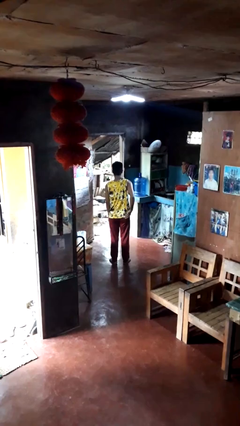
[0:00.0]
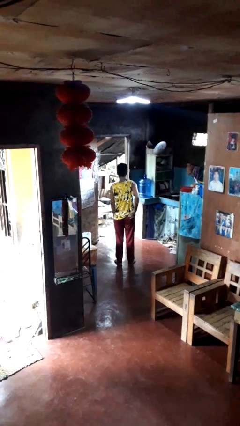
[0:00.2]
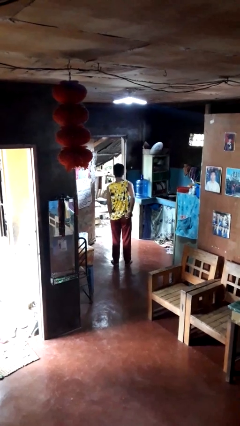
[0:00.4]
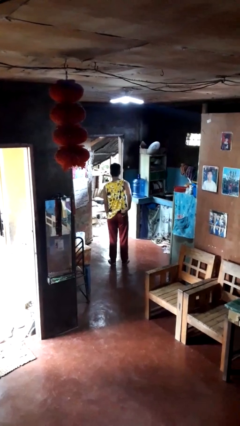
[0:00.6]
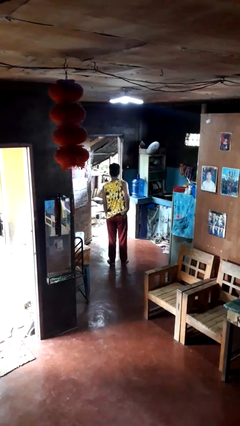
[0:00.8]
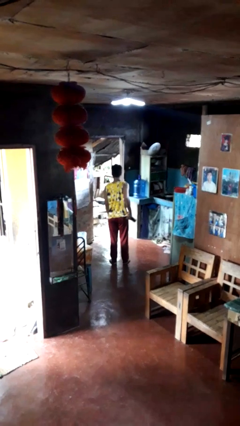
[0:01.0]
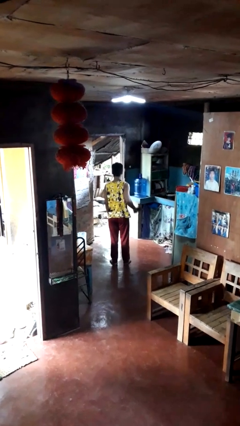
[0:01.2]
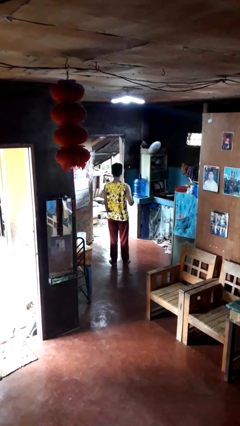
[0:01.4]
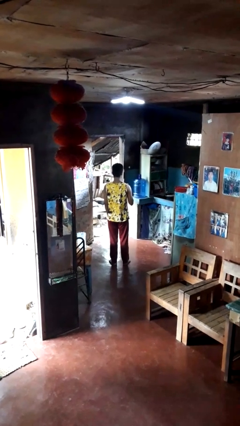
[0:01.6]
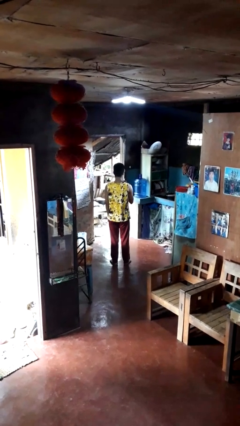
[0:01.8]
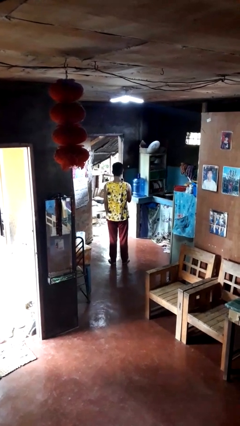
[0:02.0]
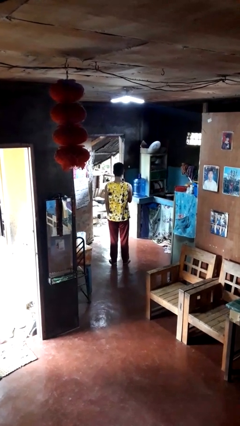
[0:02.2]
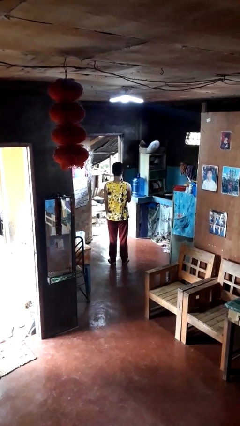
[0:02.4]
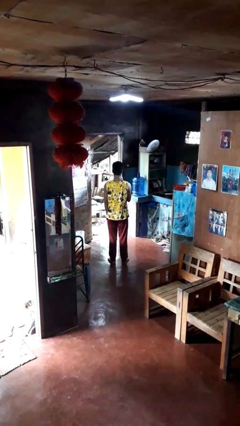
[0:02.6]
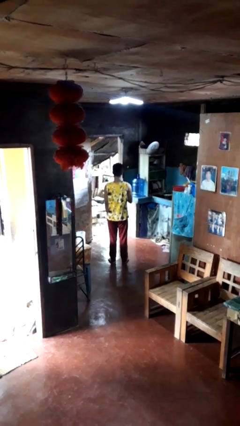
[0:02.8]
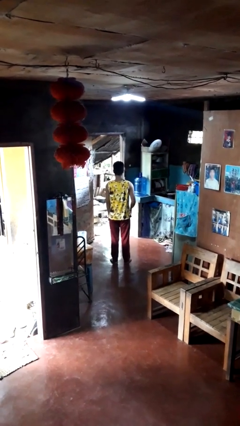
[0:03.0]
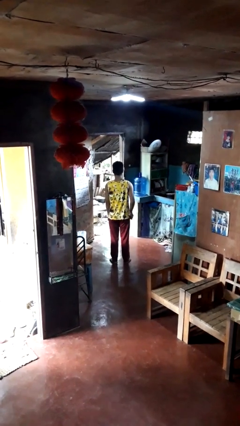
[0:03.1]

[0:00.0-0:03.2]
person takes phone from pocket

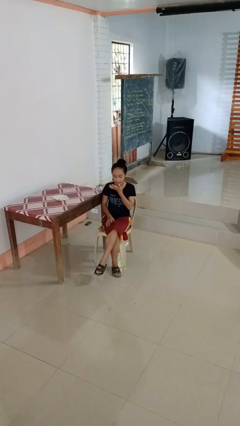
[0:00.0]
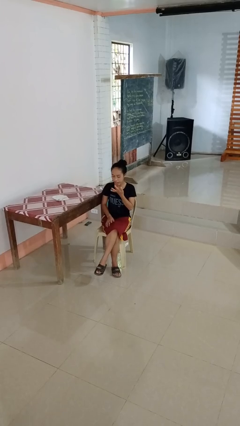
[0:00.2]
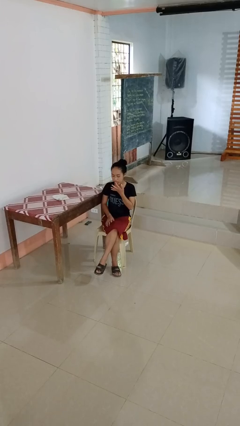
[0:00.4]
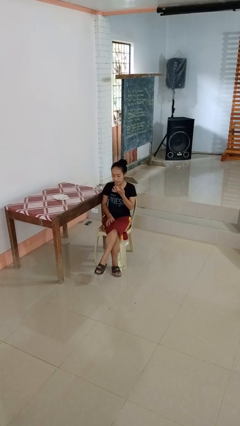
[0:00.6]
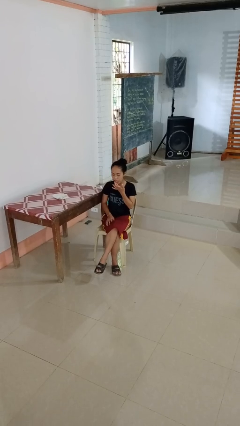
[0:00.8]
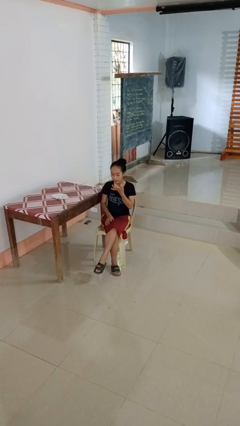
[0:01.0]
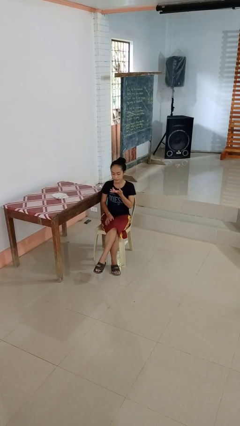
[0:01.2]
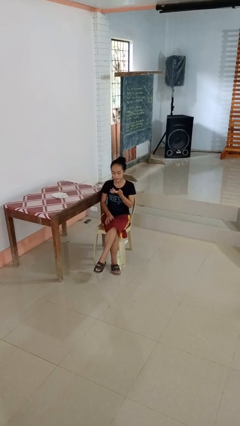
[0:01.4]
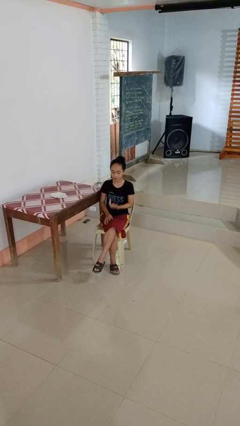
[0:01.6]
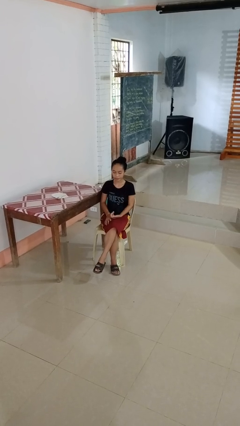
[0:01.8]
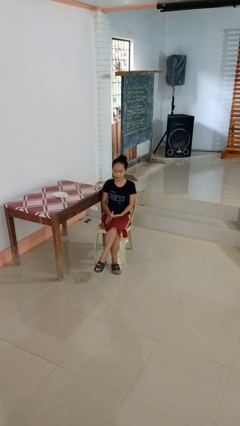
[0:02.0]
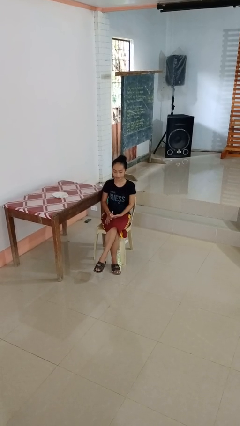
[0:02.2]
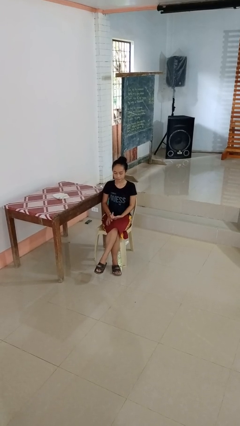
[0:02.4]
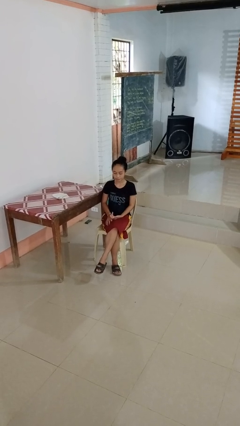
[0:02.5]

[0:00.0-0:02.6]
person licks fingers

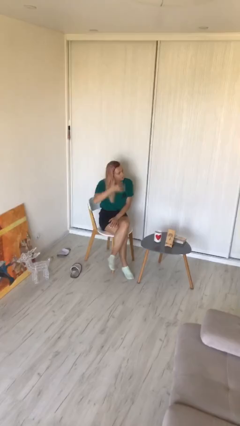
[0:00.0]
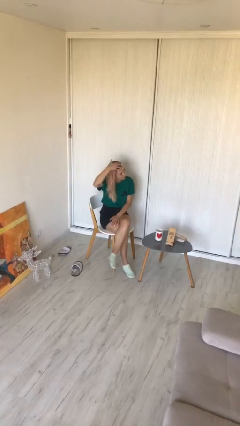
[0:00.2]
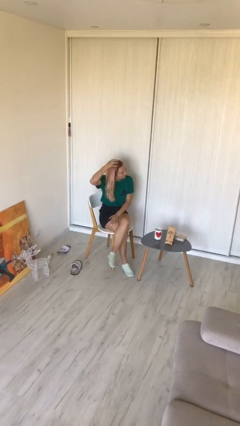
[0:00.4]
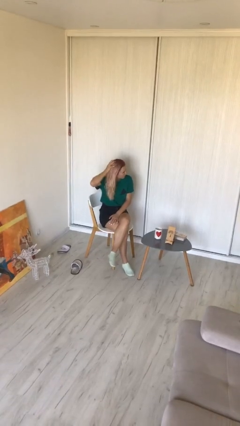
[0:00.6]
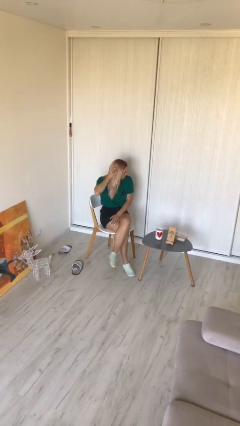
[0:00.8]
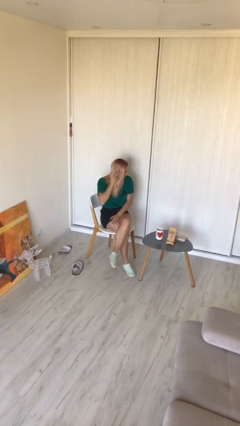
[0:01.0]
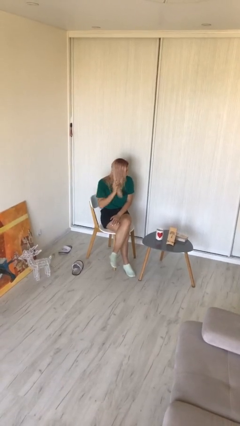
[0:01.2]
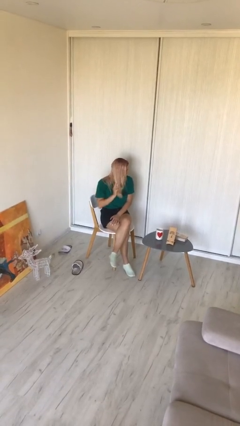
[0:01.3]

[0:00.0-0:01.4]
person strokes hair

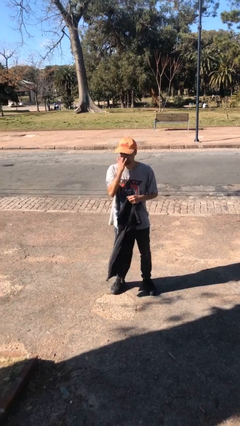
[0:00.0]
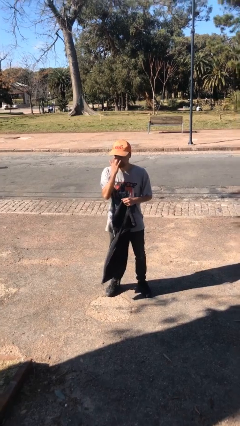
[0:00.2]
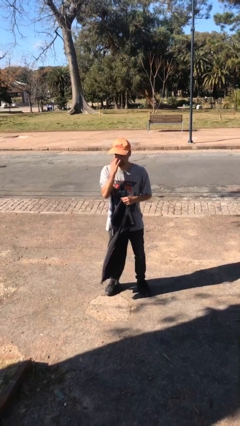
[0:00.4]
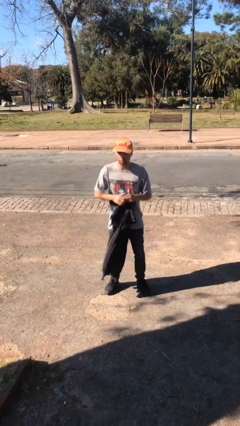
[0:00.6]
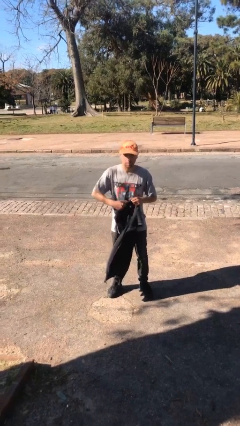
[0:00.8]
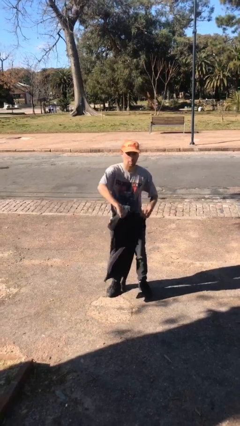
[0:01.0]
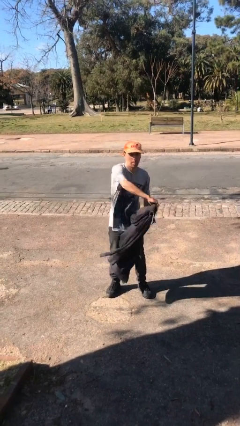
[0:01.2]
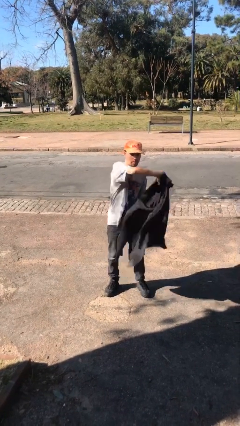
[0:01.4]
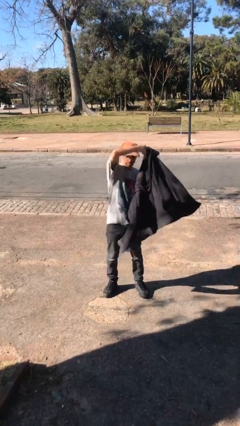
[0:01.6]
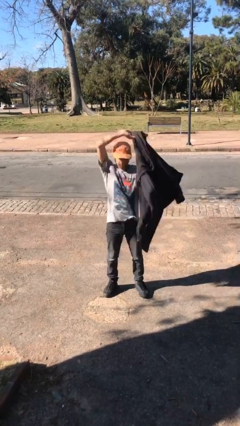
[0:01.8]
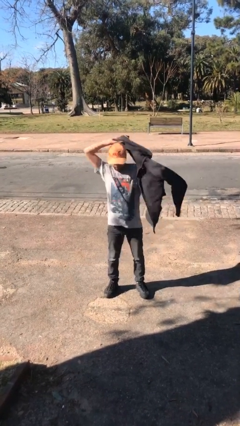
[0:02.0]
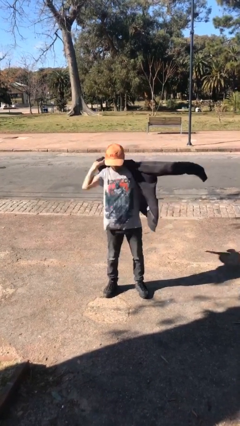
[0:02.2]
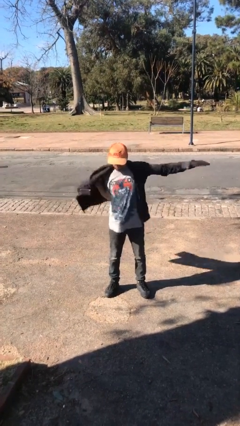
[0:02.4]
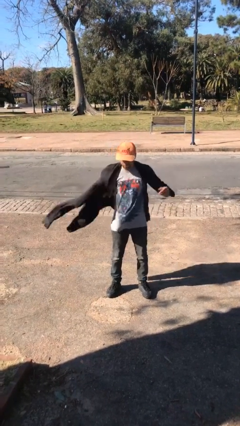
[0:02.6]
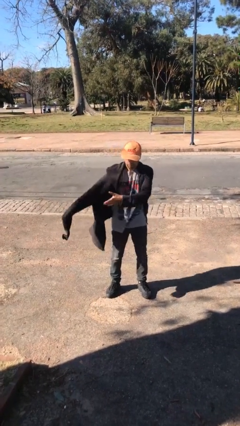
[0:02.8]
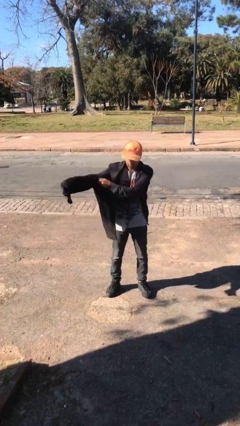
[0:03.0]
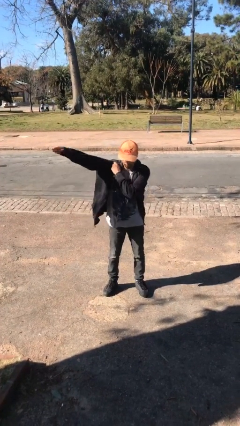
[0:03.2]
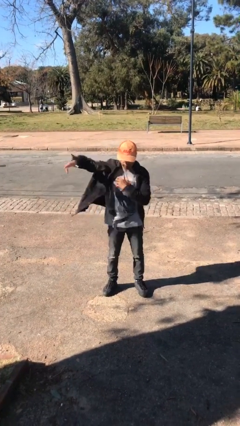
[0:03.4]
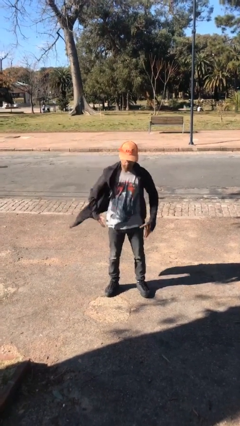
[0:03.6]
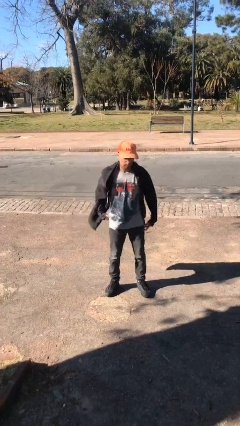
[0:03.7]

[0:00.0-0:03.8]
person puts on jacket

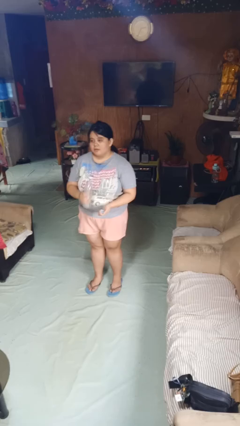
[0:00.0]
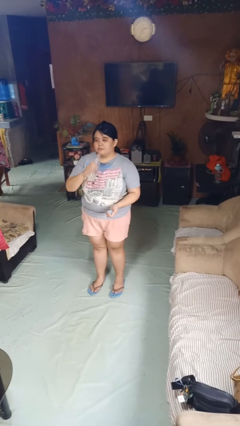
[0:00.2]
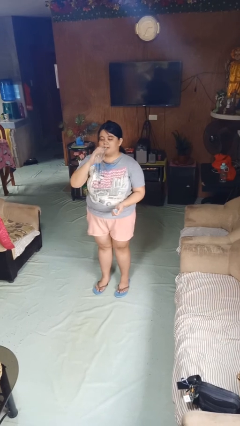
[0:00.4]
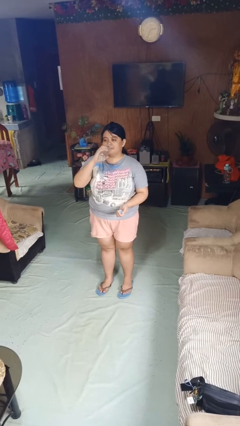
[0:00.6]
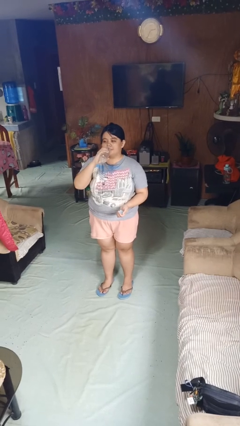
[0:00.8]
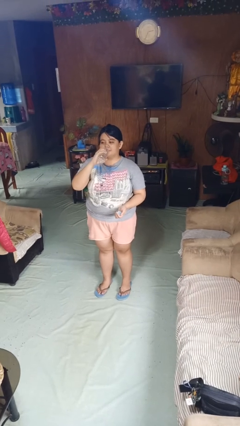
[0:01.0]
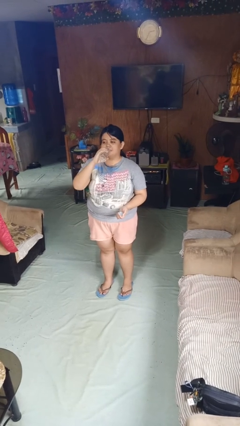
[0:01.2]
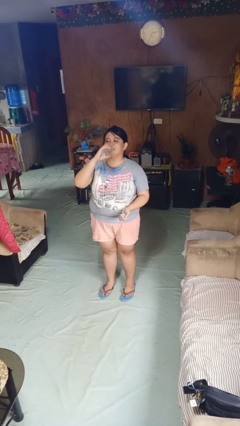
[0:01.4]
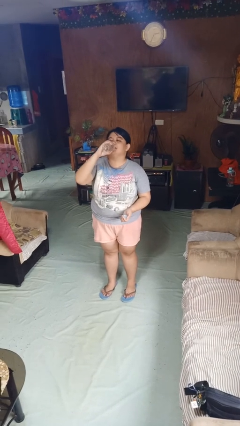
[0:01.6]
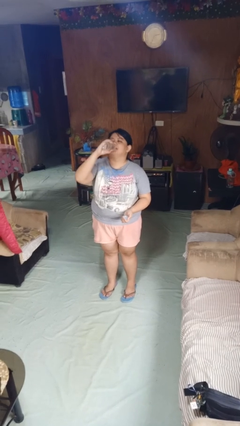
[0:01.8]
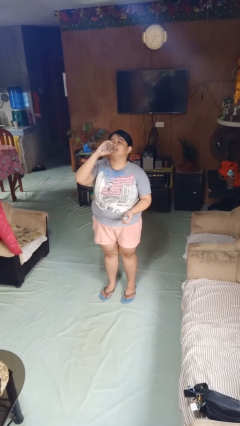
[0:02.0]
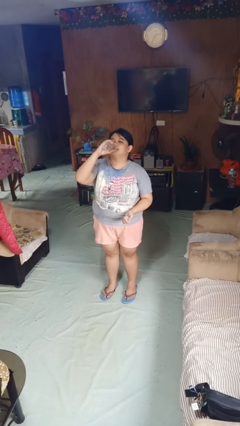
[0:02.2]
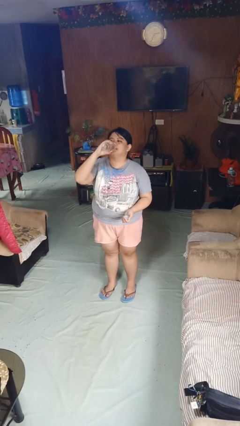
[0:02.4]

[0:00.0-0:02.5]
person drinks from bottle

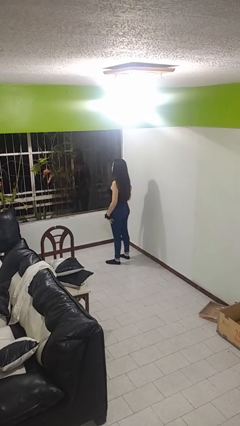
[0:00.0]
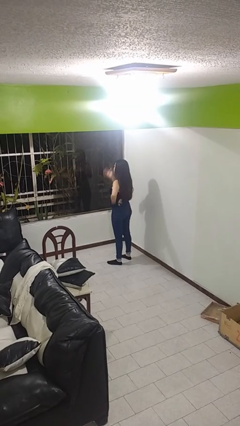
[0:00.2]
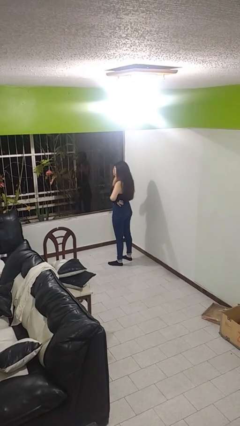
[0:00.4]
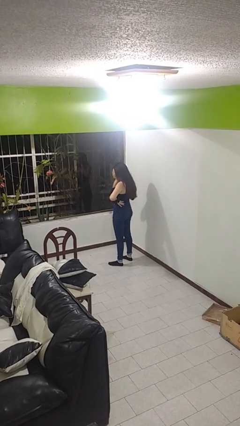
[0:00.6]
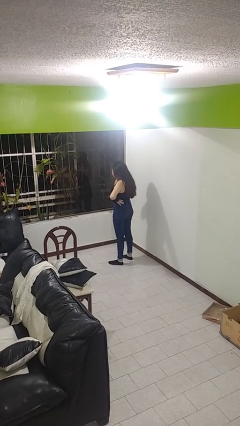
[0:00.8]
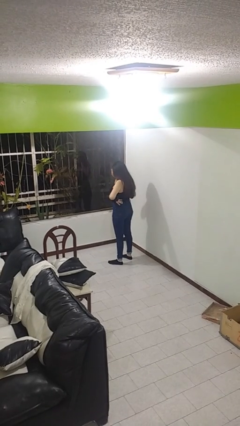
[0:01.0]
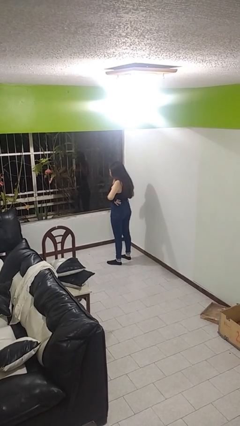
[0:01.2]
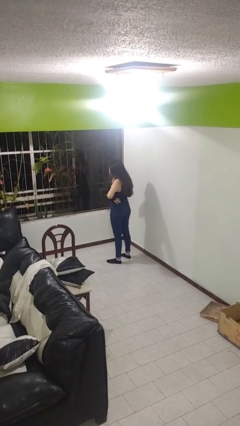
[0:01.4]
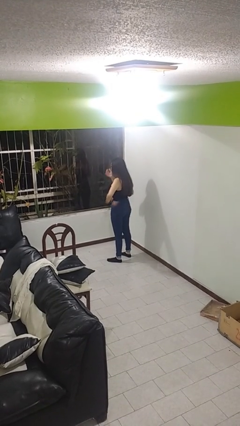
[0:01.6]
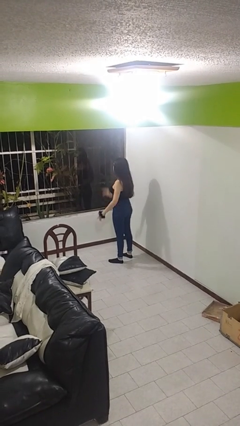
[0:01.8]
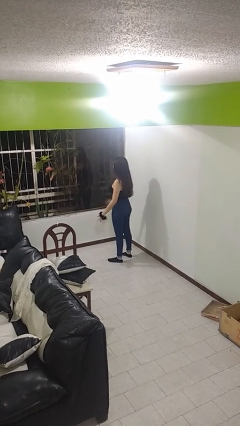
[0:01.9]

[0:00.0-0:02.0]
person covers face with hands

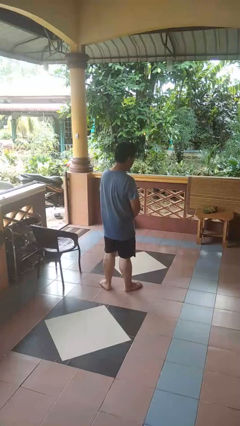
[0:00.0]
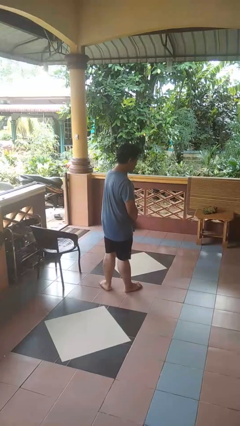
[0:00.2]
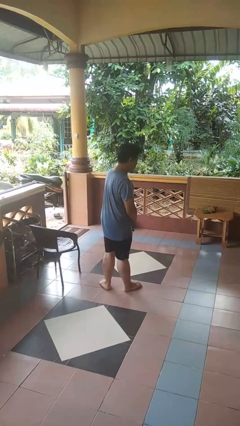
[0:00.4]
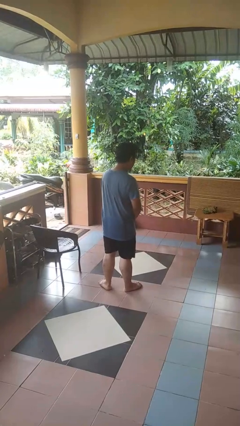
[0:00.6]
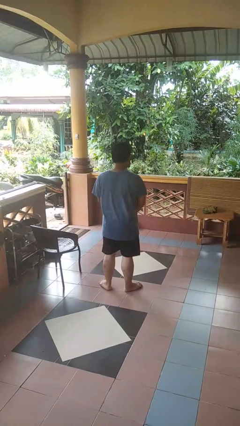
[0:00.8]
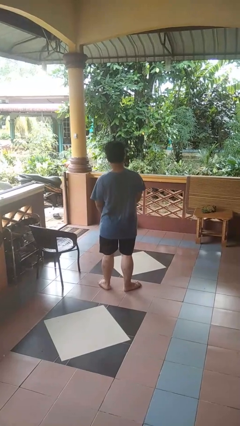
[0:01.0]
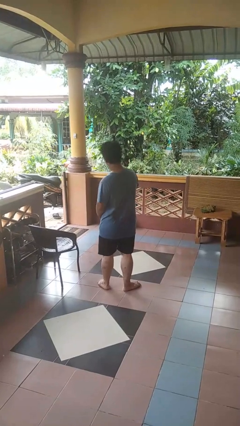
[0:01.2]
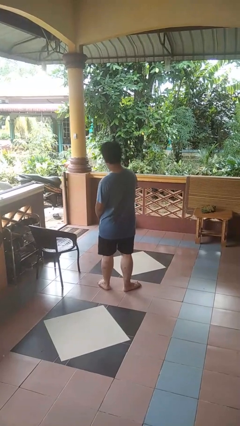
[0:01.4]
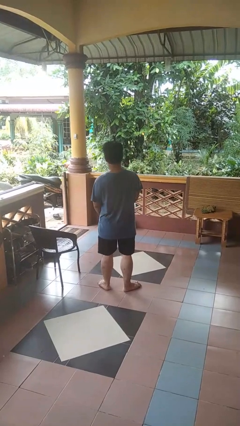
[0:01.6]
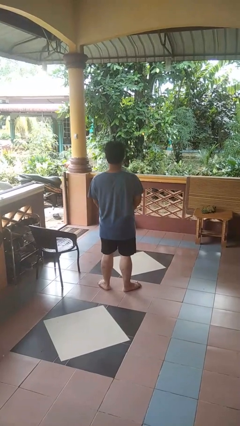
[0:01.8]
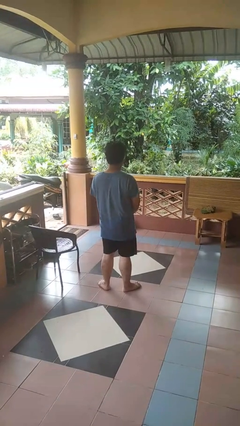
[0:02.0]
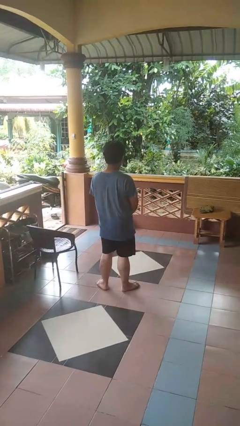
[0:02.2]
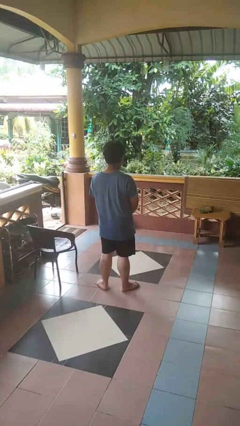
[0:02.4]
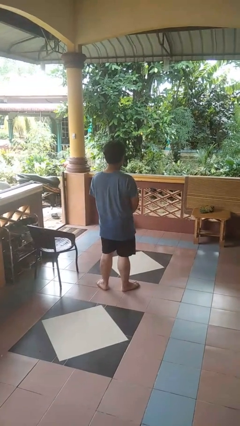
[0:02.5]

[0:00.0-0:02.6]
person twirls
